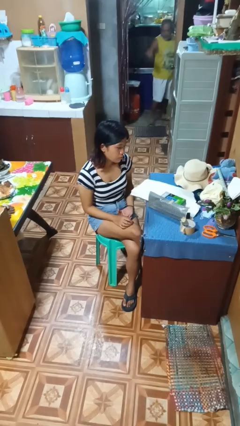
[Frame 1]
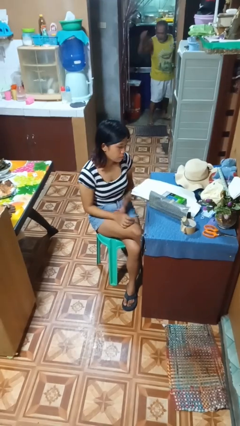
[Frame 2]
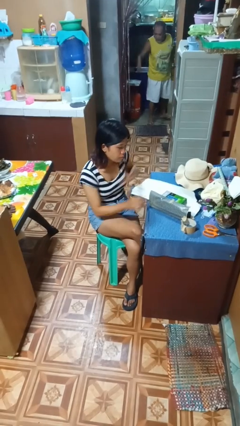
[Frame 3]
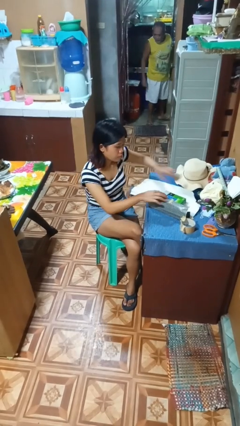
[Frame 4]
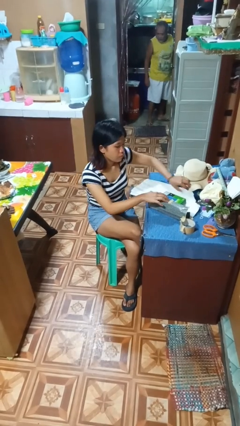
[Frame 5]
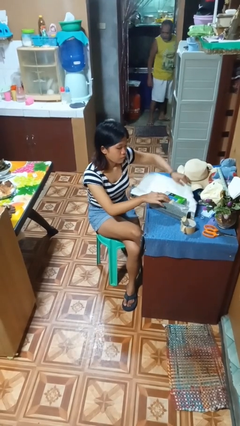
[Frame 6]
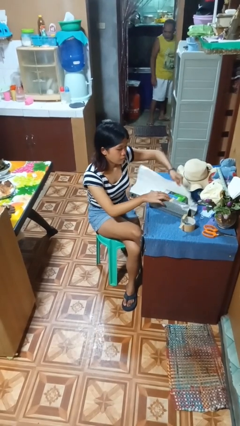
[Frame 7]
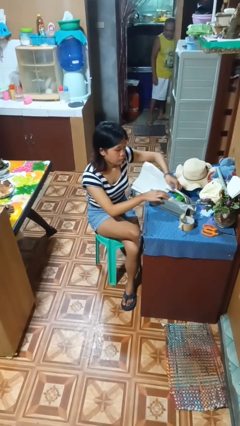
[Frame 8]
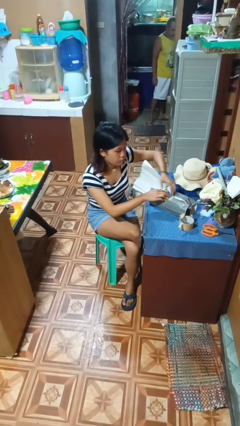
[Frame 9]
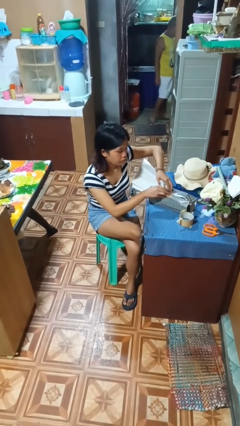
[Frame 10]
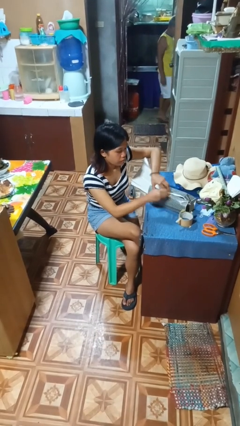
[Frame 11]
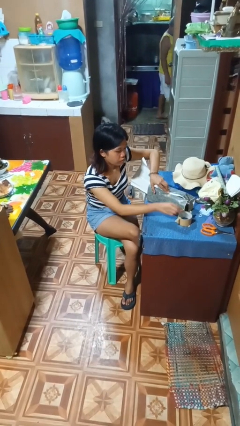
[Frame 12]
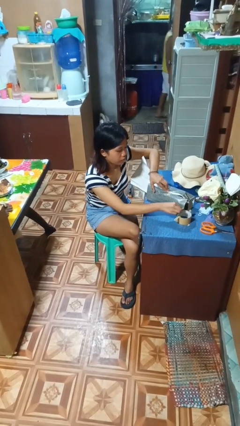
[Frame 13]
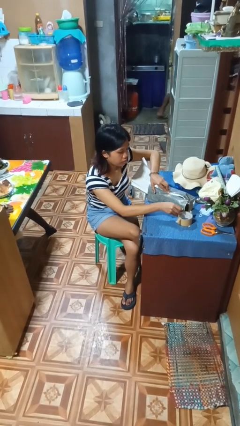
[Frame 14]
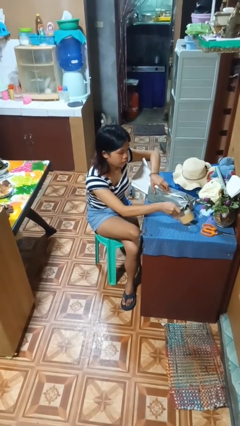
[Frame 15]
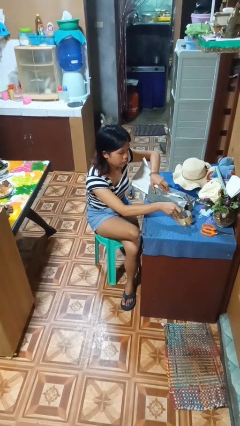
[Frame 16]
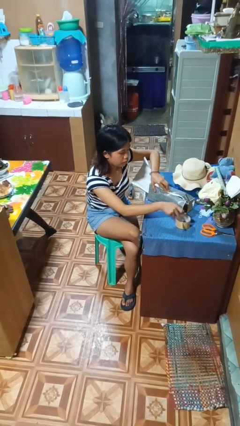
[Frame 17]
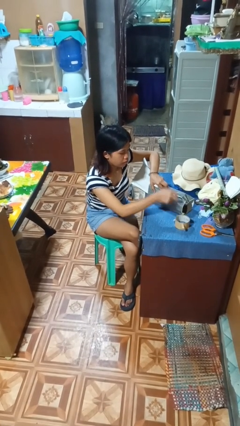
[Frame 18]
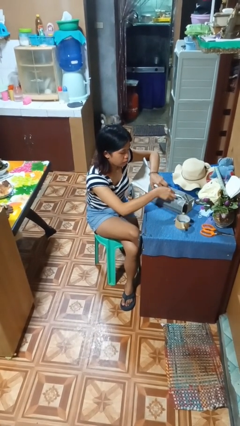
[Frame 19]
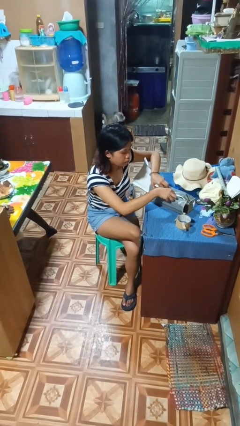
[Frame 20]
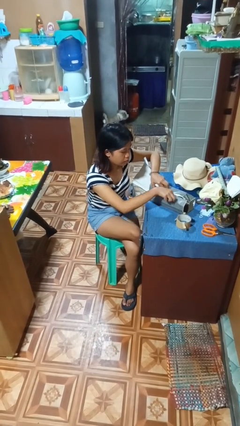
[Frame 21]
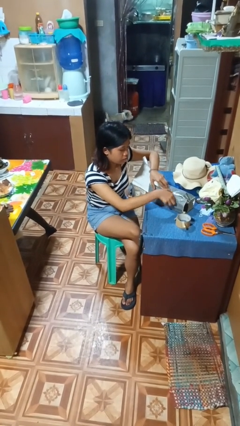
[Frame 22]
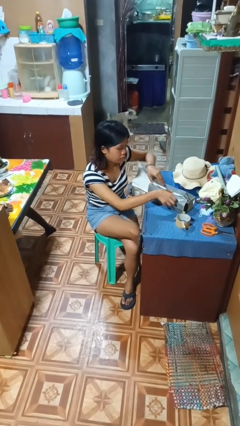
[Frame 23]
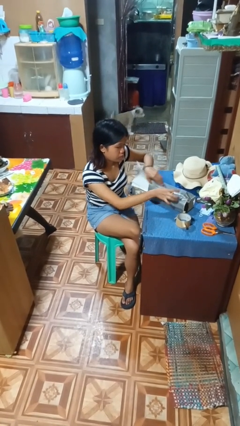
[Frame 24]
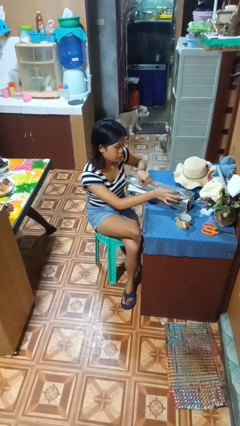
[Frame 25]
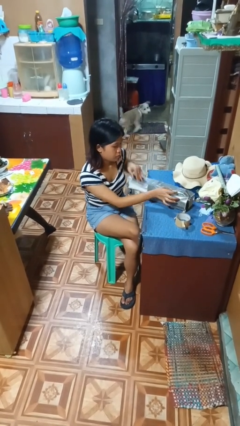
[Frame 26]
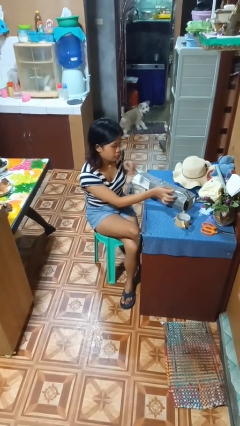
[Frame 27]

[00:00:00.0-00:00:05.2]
person wraps box

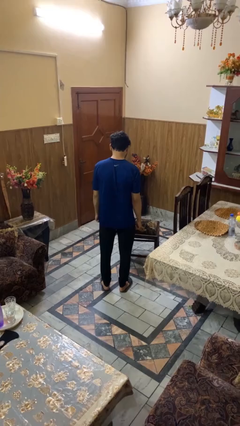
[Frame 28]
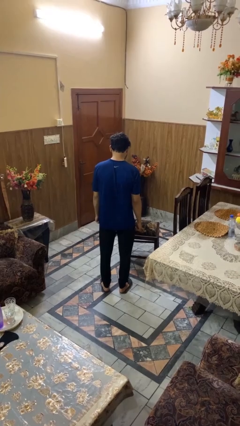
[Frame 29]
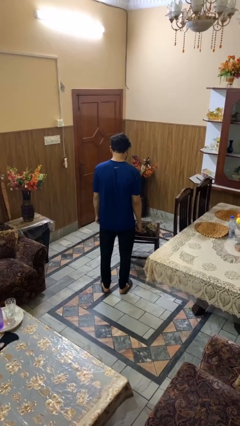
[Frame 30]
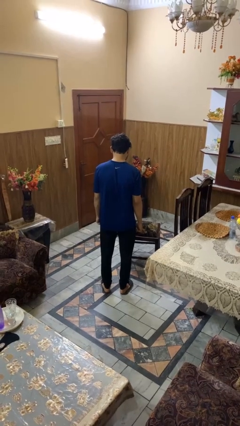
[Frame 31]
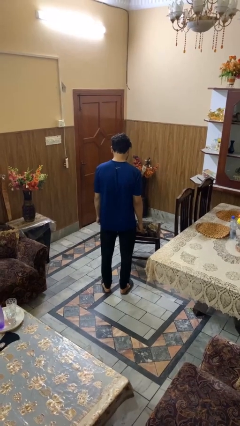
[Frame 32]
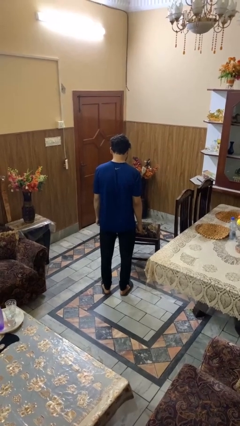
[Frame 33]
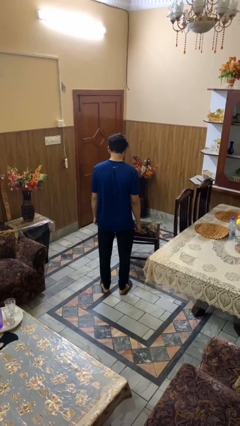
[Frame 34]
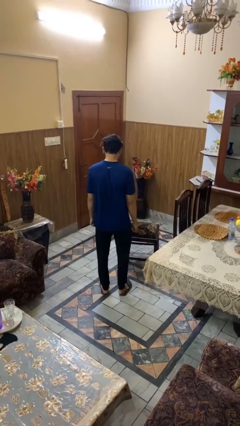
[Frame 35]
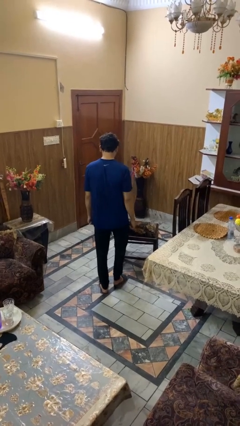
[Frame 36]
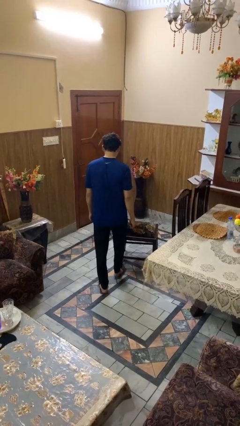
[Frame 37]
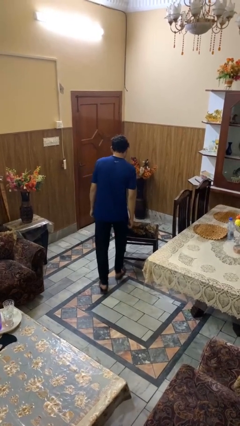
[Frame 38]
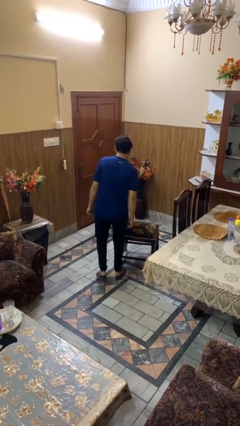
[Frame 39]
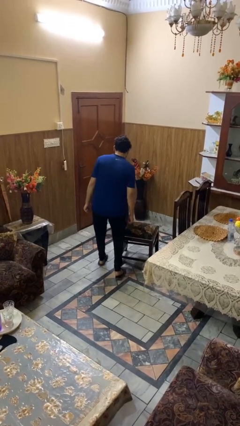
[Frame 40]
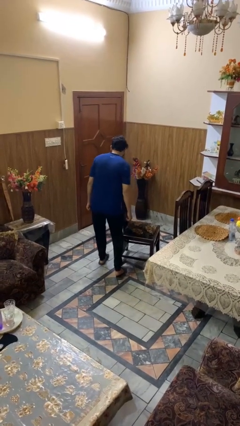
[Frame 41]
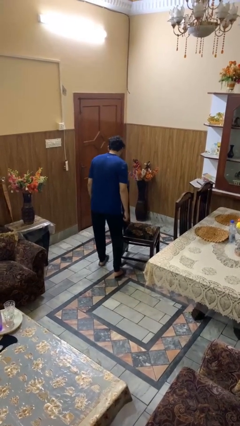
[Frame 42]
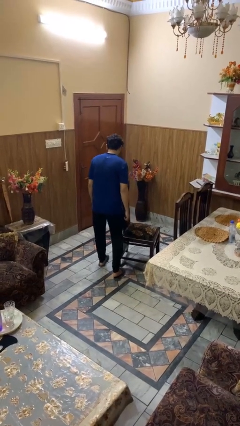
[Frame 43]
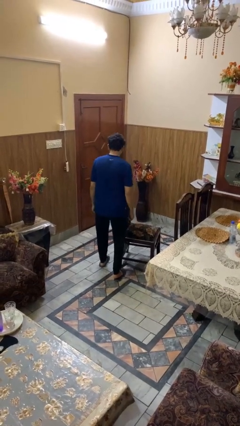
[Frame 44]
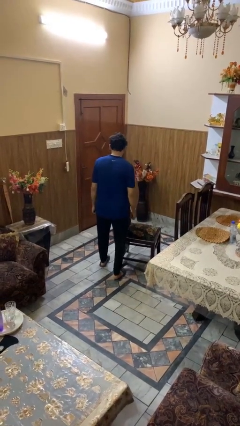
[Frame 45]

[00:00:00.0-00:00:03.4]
person stubs toe

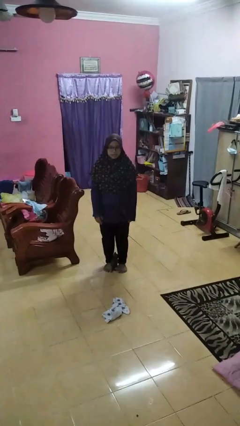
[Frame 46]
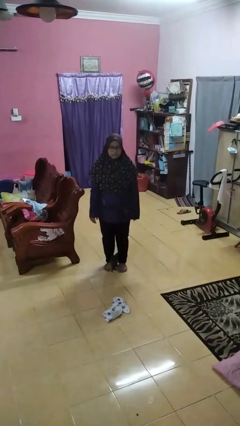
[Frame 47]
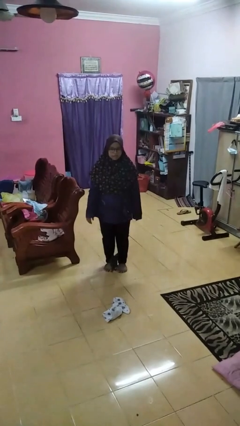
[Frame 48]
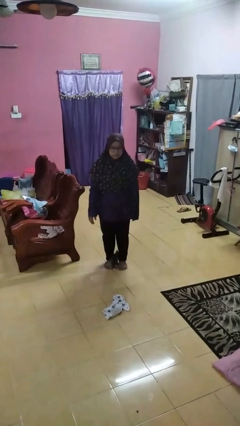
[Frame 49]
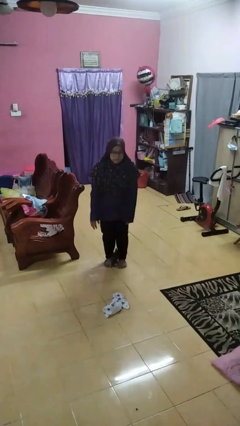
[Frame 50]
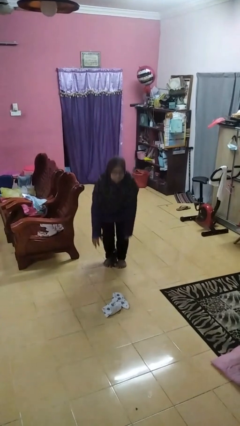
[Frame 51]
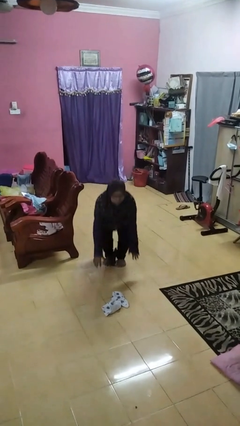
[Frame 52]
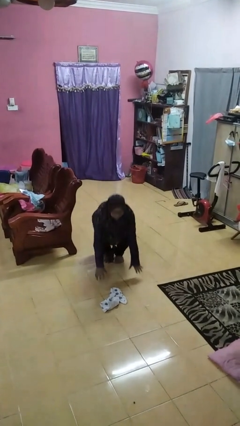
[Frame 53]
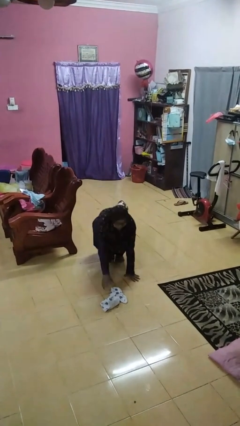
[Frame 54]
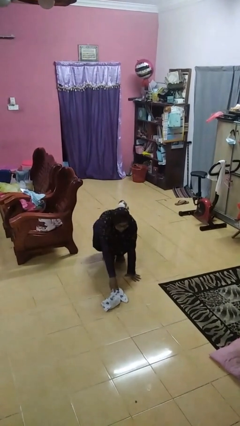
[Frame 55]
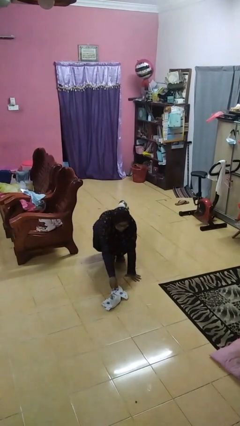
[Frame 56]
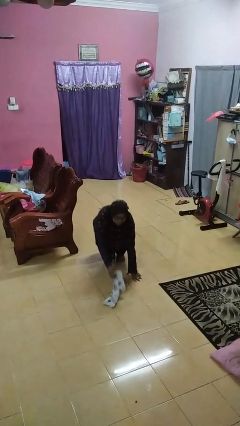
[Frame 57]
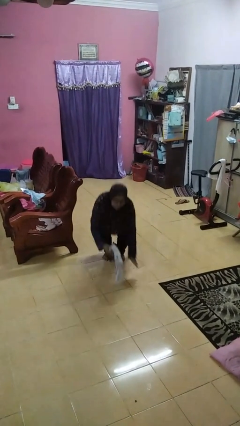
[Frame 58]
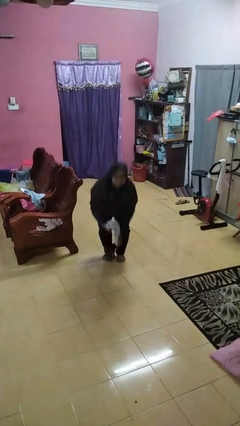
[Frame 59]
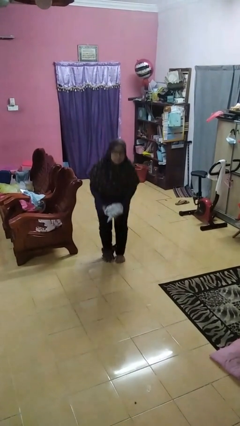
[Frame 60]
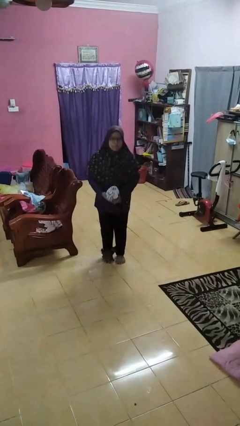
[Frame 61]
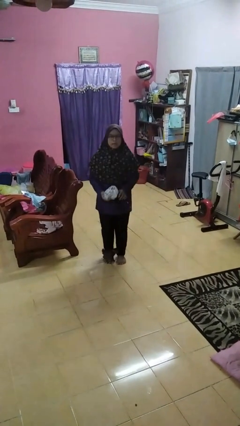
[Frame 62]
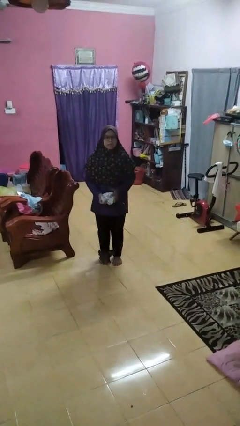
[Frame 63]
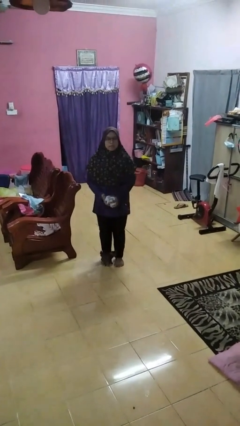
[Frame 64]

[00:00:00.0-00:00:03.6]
person picks up object from floor

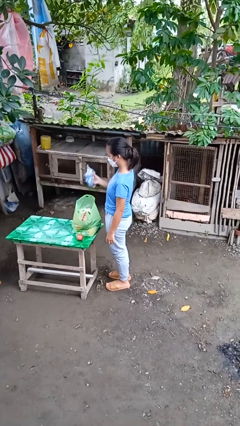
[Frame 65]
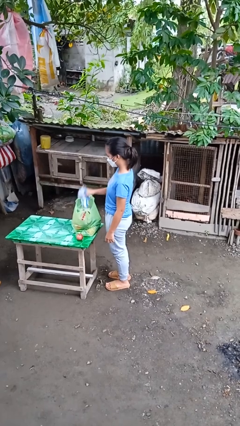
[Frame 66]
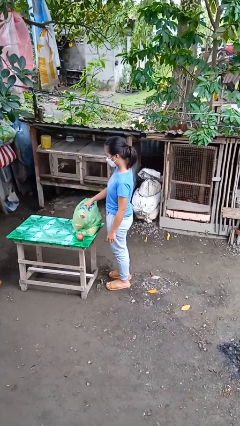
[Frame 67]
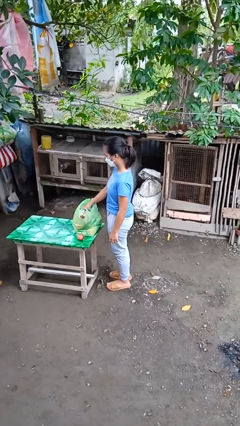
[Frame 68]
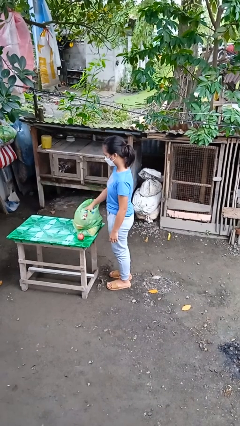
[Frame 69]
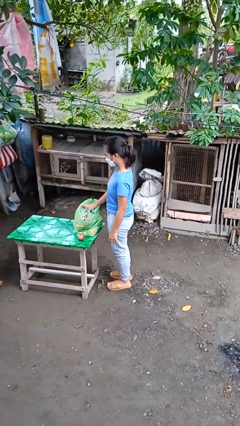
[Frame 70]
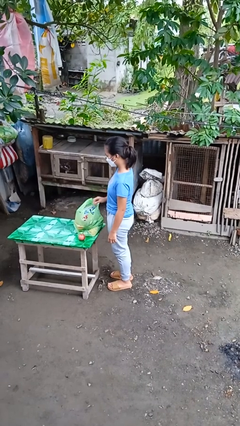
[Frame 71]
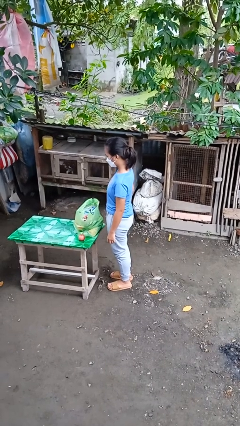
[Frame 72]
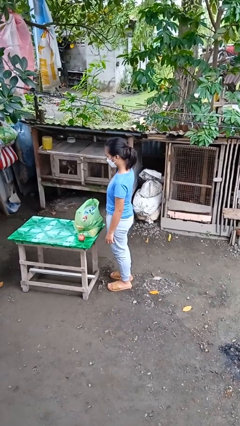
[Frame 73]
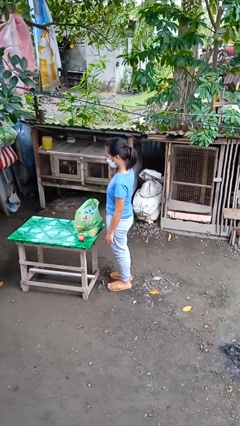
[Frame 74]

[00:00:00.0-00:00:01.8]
person puts object into bag

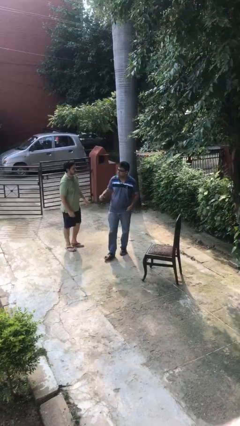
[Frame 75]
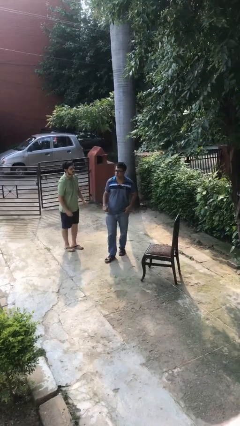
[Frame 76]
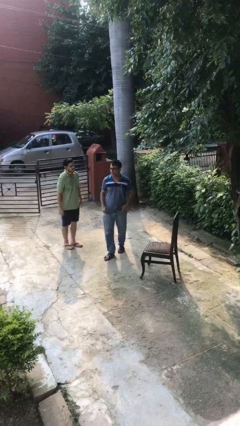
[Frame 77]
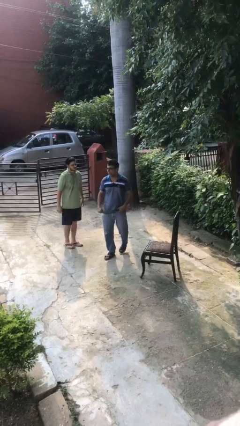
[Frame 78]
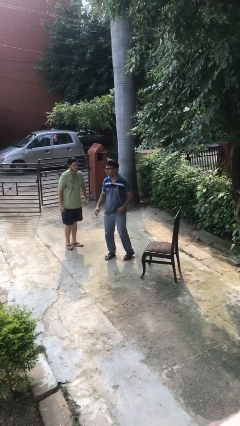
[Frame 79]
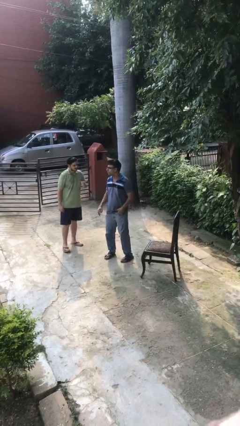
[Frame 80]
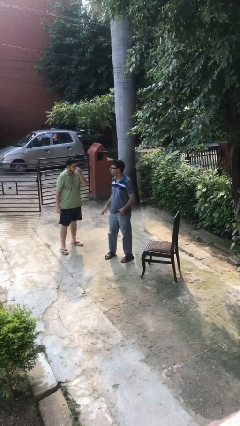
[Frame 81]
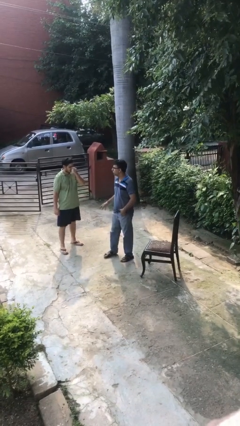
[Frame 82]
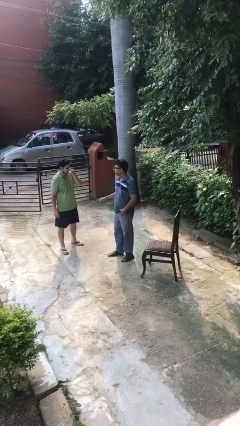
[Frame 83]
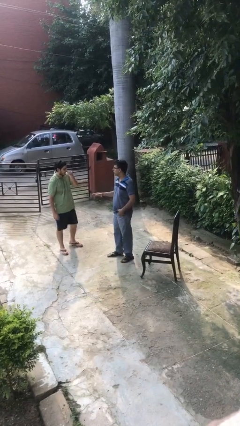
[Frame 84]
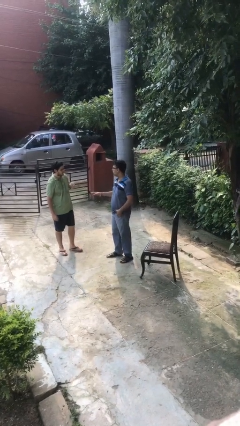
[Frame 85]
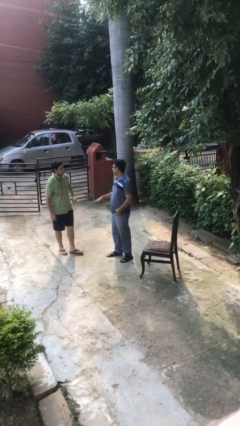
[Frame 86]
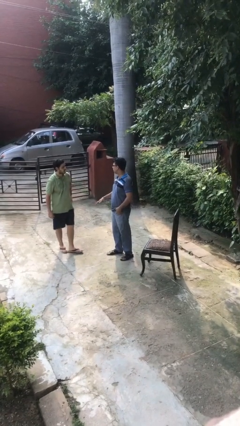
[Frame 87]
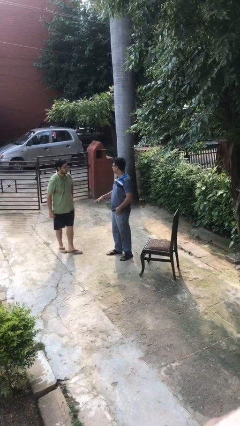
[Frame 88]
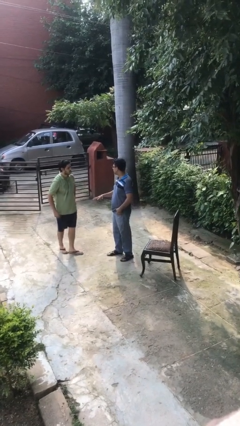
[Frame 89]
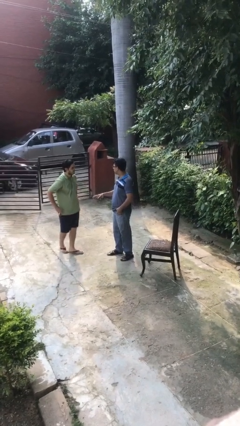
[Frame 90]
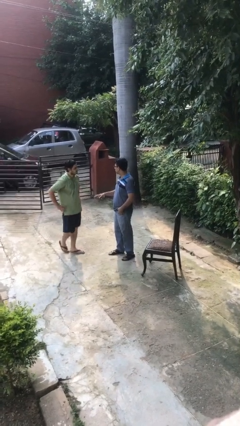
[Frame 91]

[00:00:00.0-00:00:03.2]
person talks to person

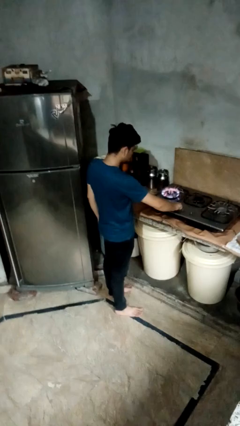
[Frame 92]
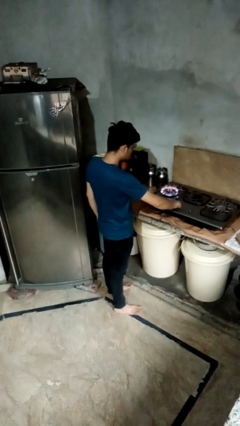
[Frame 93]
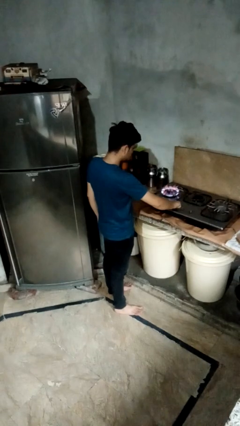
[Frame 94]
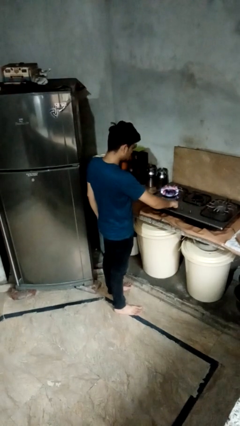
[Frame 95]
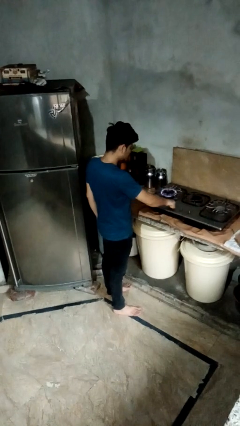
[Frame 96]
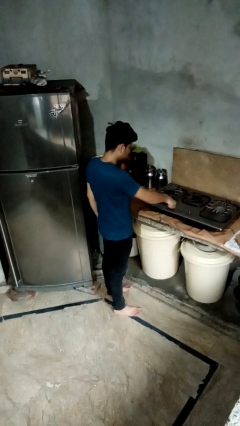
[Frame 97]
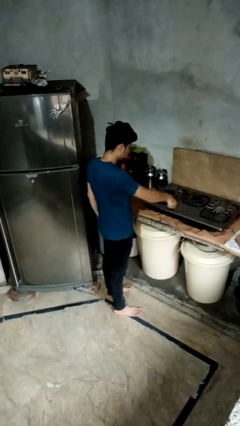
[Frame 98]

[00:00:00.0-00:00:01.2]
person turns off stovetop
